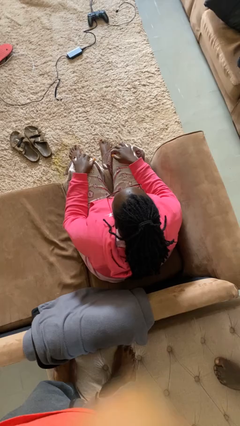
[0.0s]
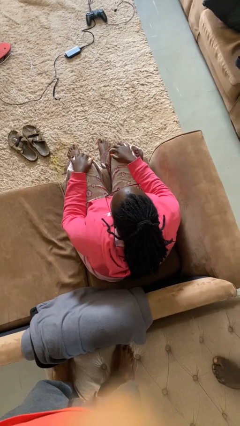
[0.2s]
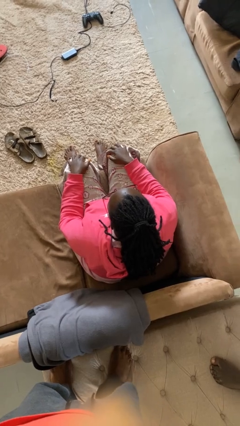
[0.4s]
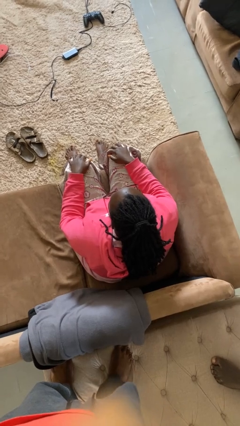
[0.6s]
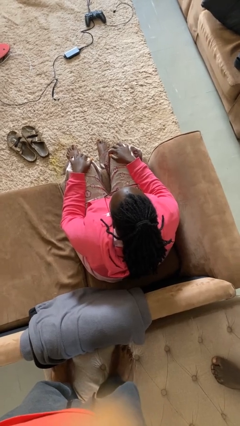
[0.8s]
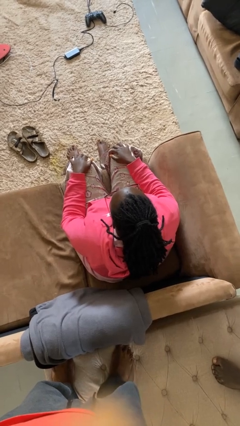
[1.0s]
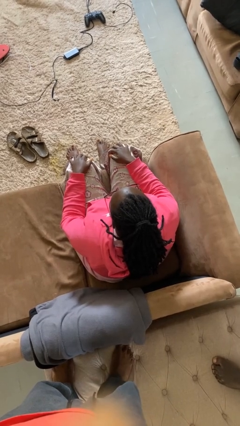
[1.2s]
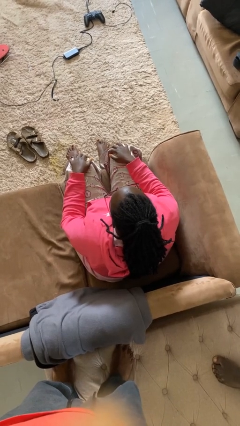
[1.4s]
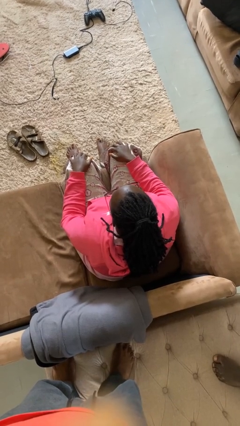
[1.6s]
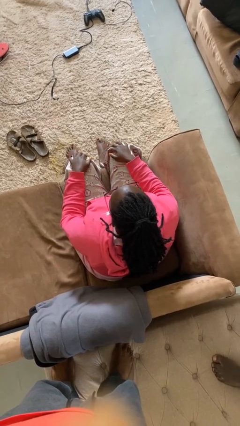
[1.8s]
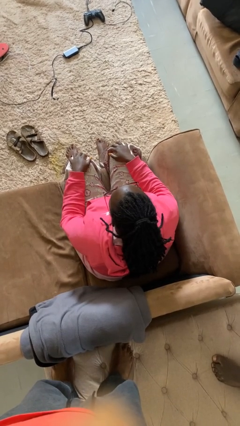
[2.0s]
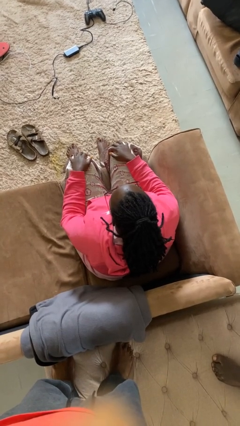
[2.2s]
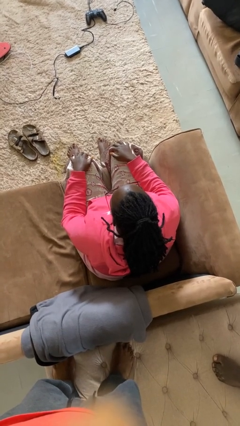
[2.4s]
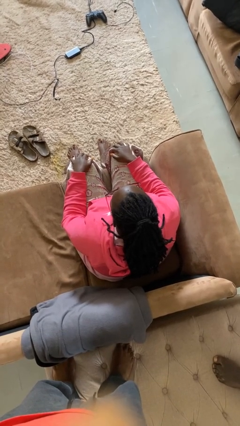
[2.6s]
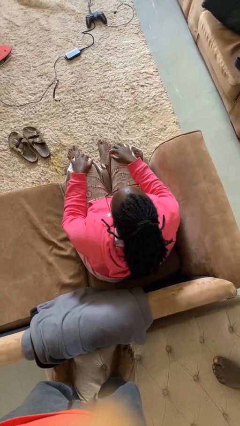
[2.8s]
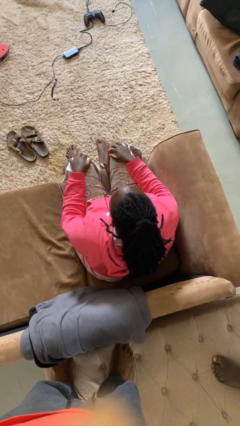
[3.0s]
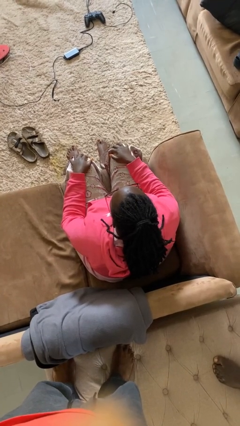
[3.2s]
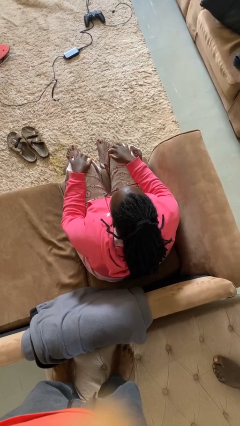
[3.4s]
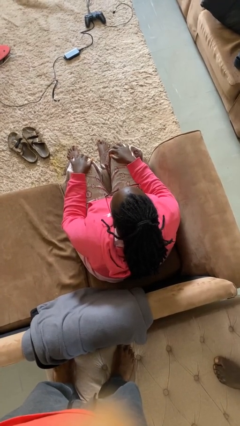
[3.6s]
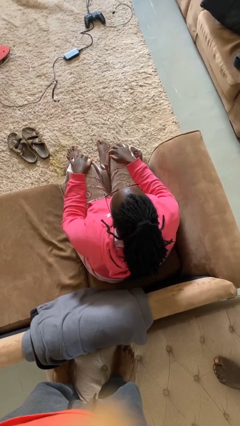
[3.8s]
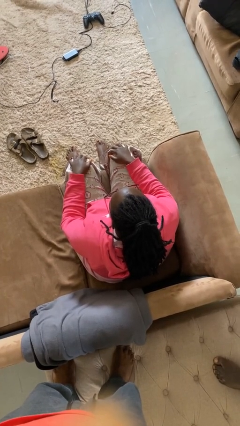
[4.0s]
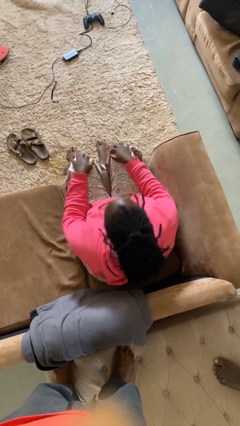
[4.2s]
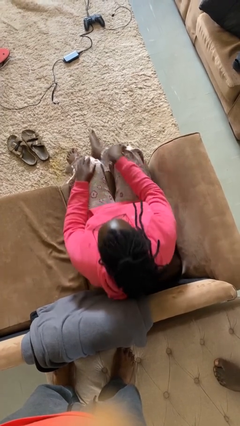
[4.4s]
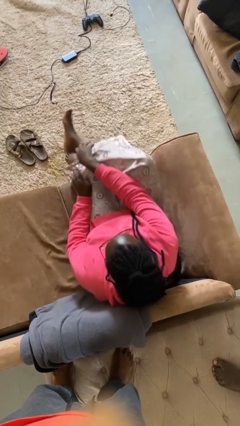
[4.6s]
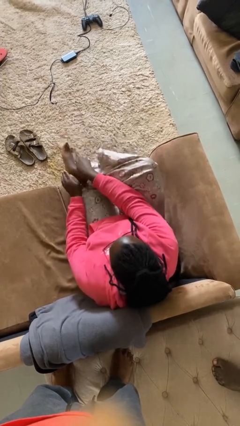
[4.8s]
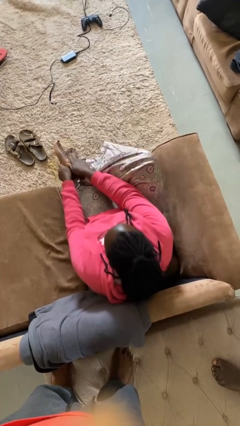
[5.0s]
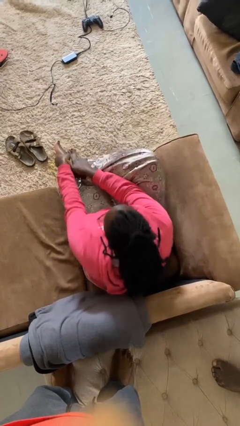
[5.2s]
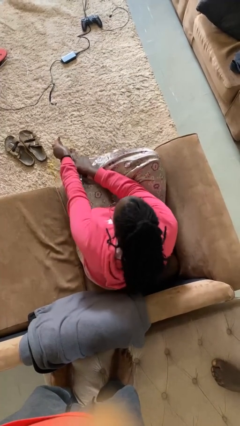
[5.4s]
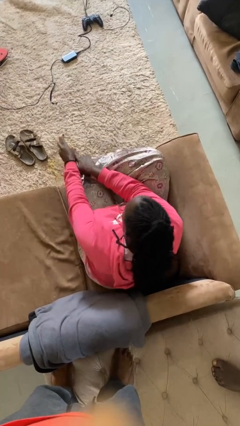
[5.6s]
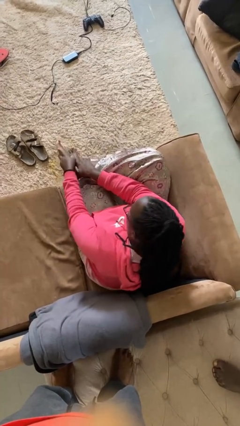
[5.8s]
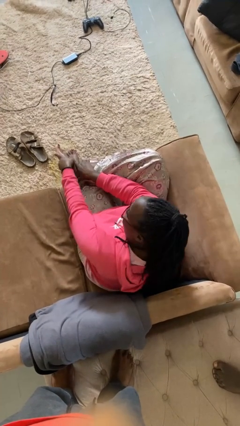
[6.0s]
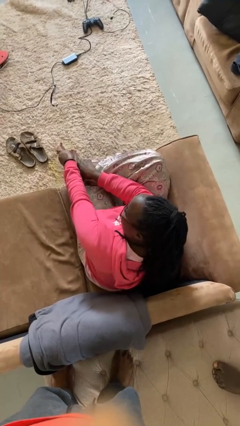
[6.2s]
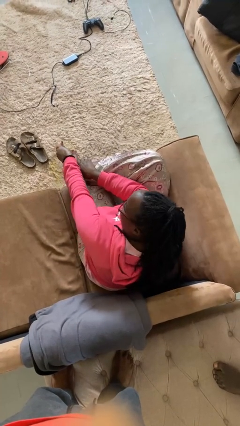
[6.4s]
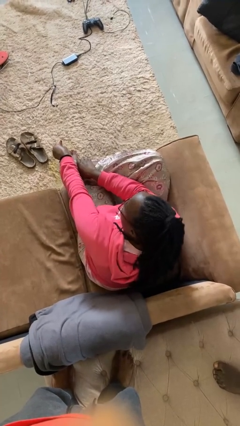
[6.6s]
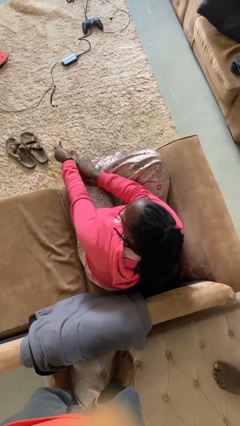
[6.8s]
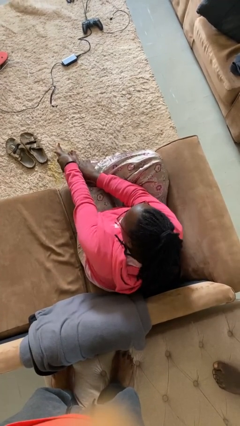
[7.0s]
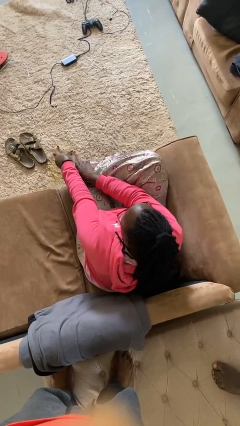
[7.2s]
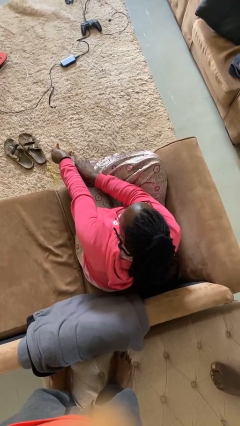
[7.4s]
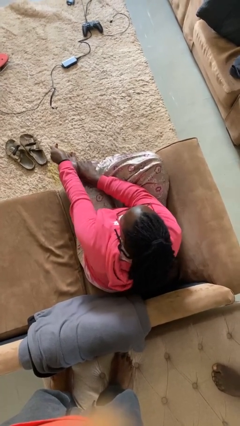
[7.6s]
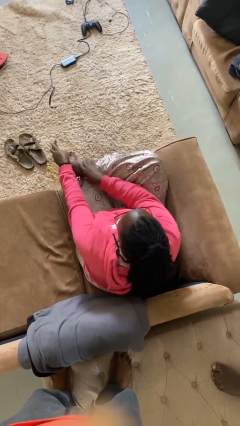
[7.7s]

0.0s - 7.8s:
person rubs foot

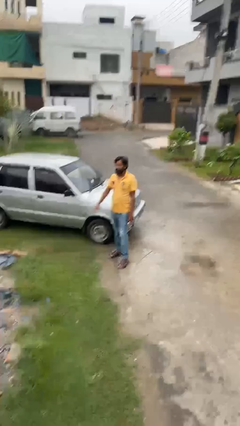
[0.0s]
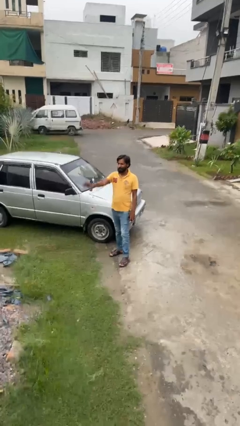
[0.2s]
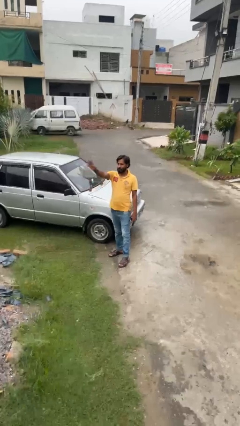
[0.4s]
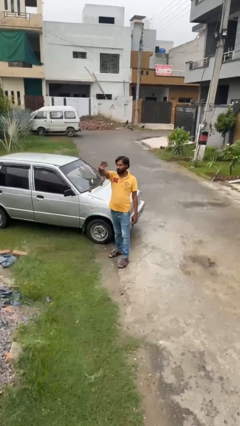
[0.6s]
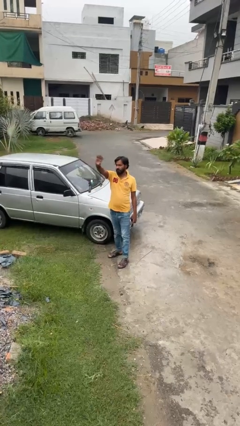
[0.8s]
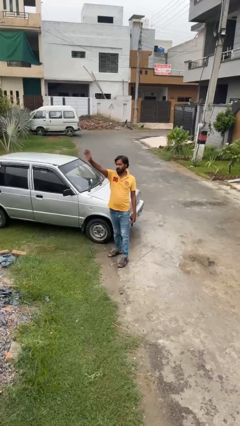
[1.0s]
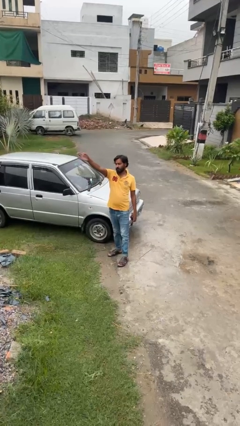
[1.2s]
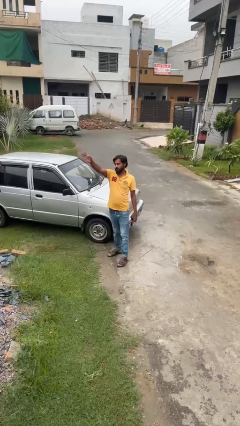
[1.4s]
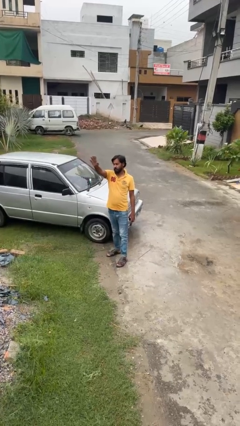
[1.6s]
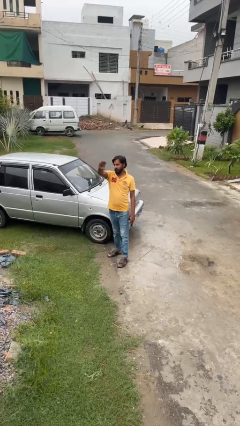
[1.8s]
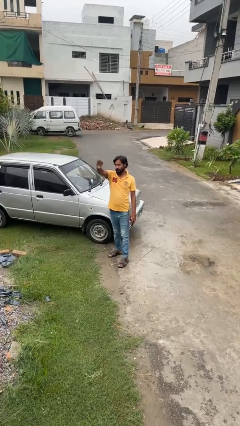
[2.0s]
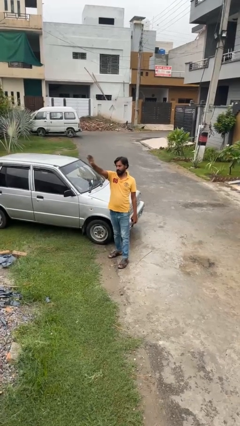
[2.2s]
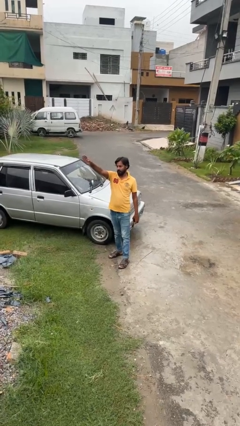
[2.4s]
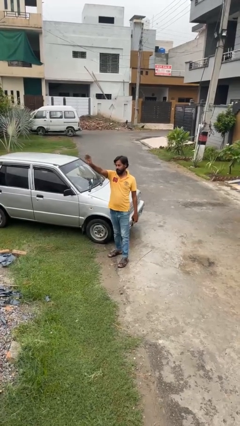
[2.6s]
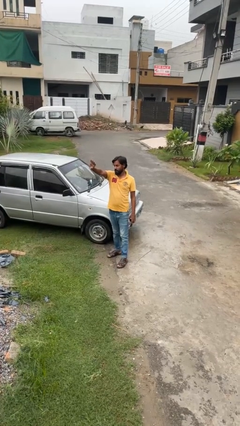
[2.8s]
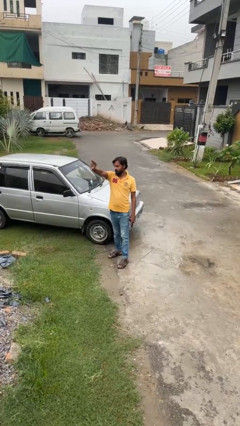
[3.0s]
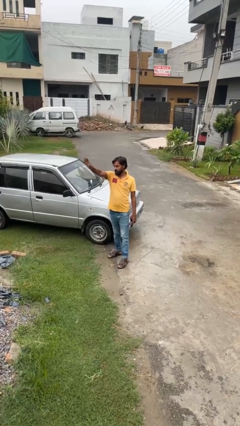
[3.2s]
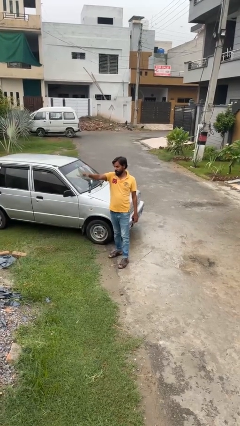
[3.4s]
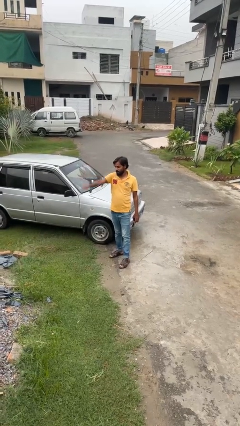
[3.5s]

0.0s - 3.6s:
person waves at person

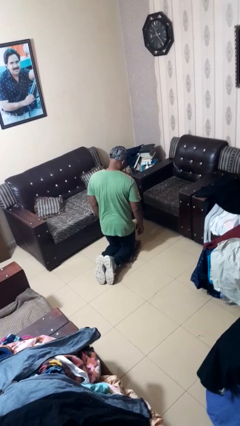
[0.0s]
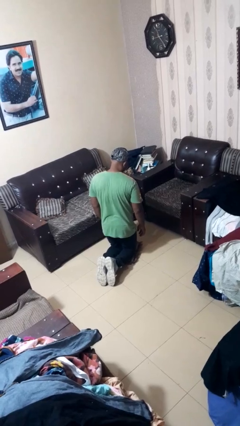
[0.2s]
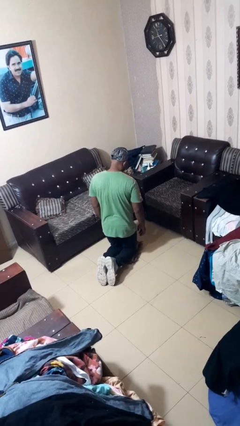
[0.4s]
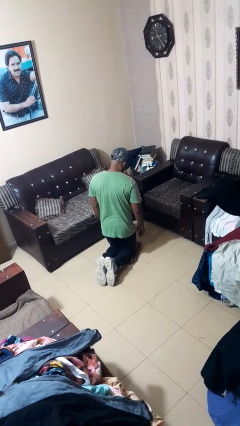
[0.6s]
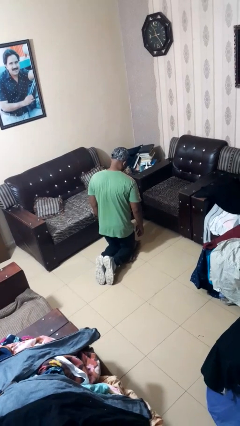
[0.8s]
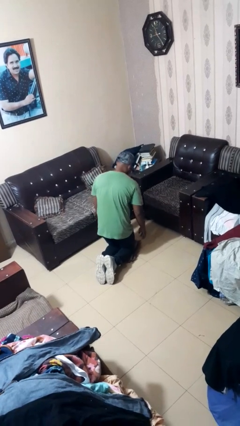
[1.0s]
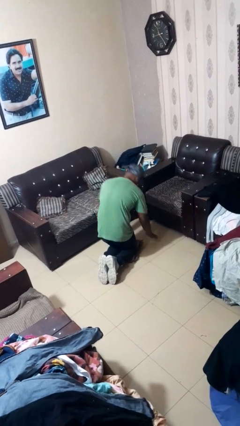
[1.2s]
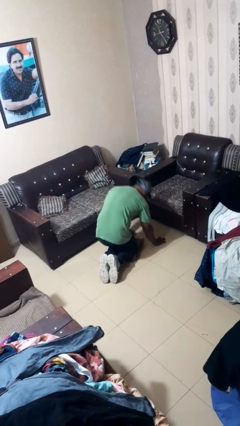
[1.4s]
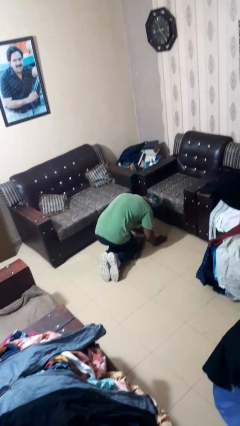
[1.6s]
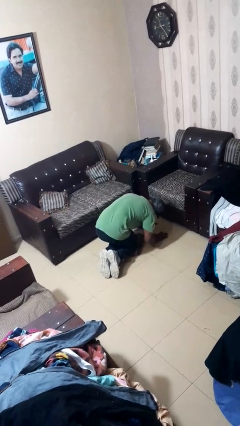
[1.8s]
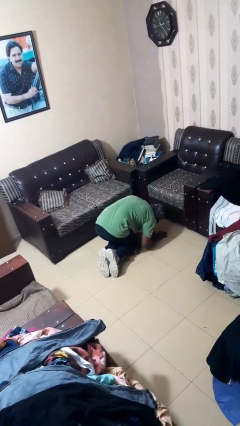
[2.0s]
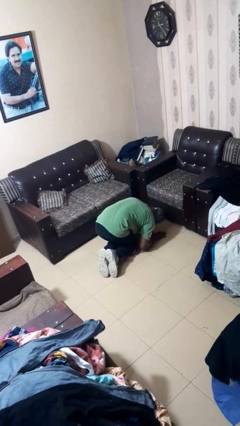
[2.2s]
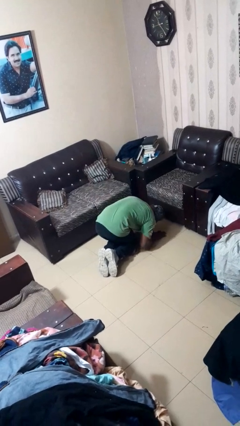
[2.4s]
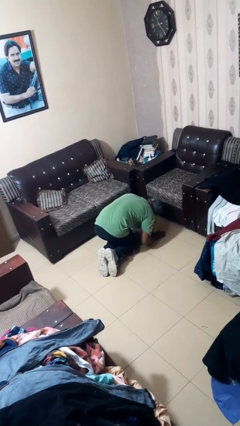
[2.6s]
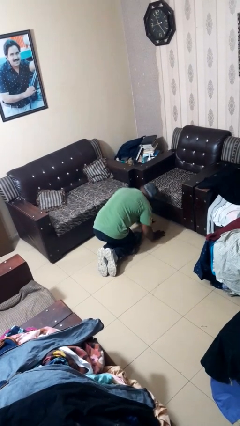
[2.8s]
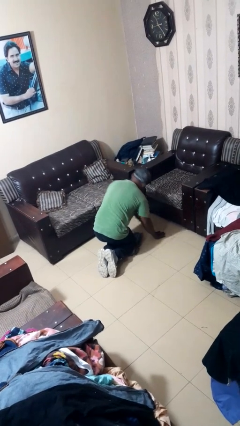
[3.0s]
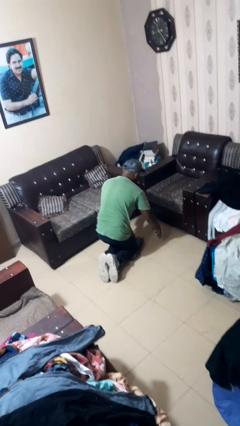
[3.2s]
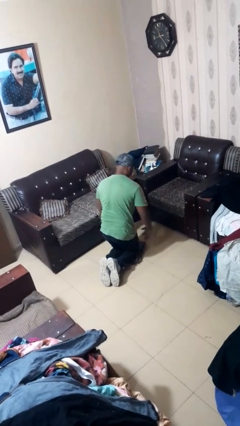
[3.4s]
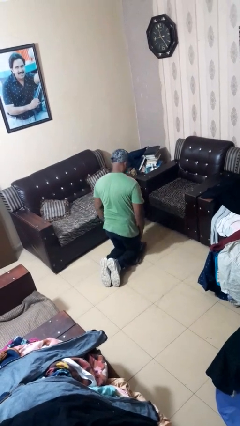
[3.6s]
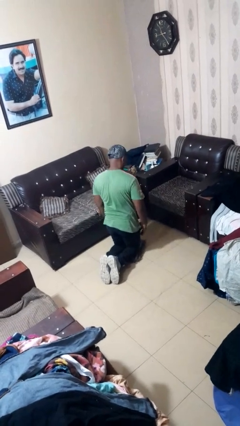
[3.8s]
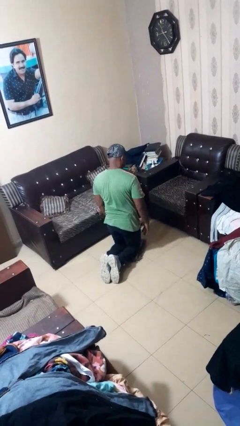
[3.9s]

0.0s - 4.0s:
person searches under couch

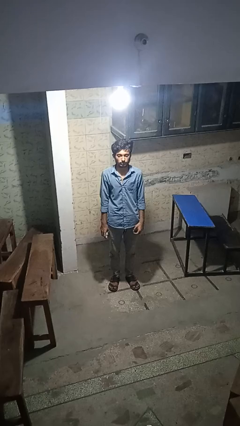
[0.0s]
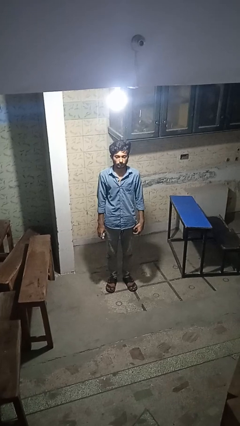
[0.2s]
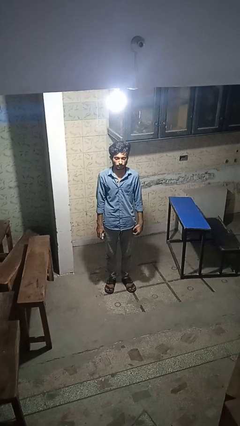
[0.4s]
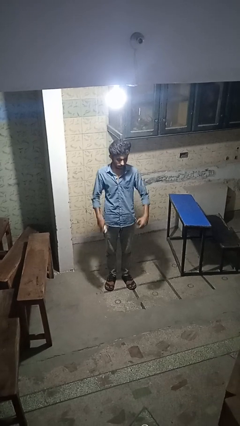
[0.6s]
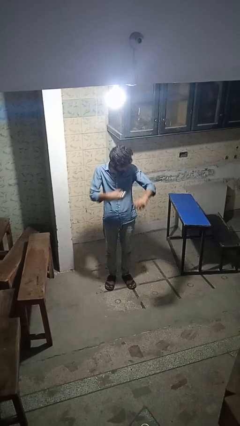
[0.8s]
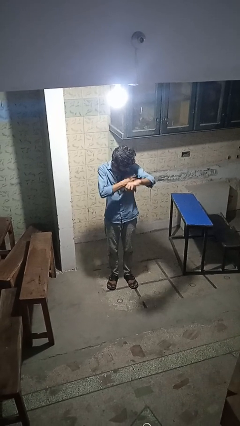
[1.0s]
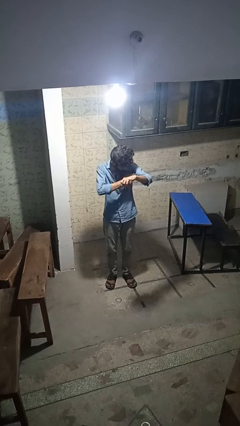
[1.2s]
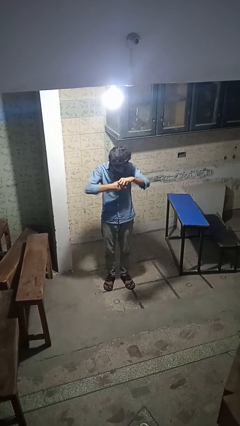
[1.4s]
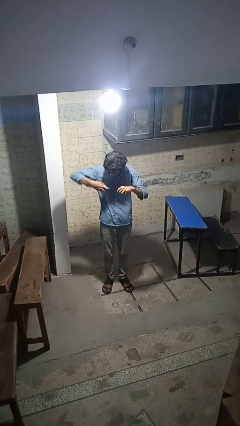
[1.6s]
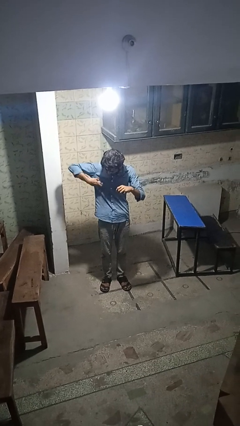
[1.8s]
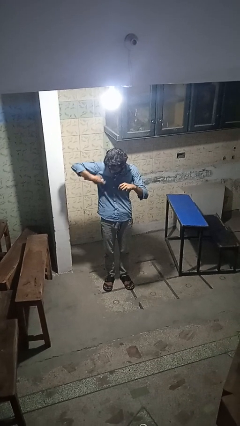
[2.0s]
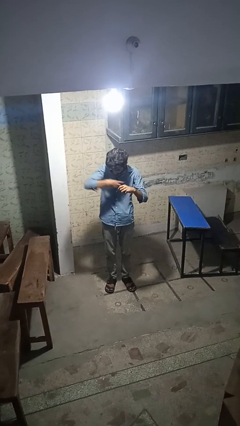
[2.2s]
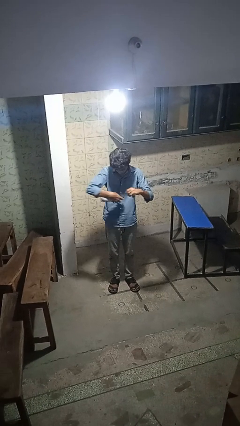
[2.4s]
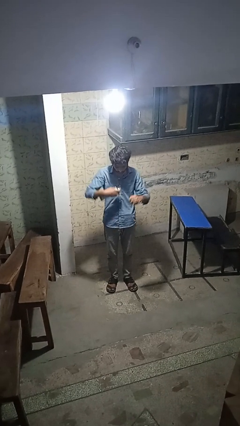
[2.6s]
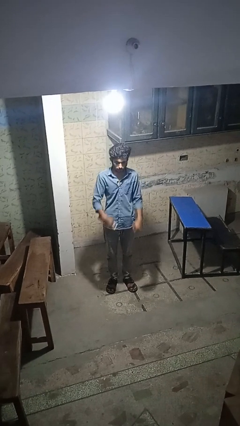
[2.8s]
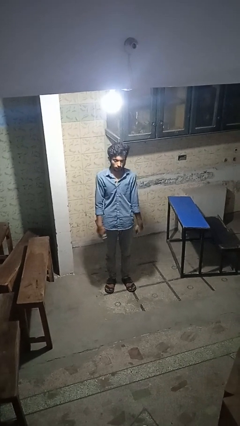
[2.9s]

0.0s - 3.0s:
person applies deodorant
